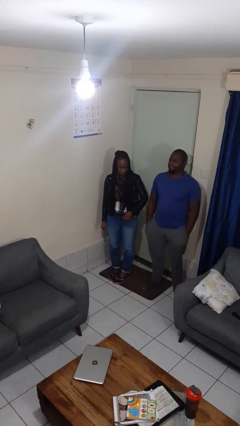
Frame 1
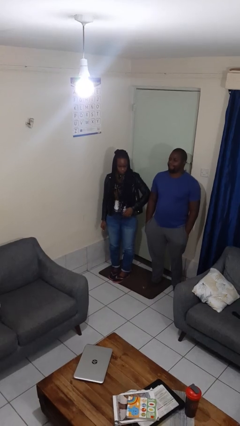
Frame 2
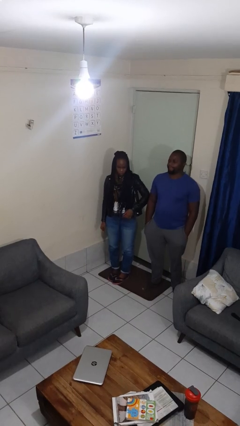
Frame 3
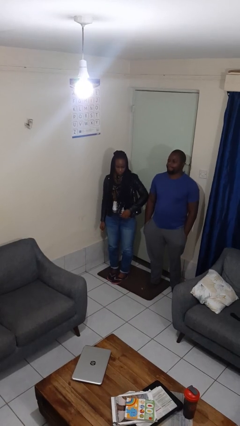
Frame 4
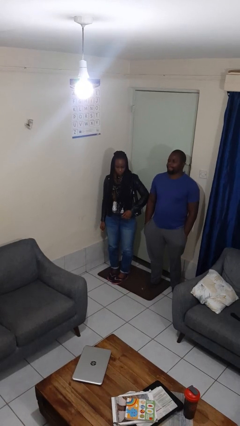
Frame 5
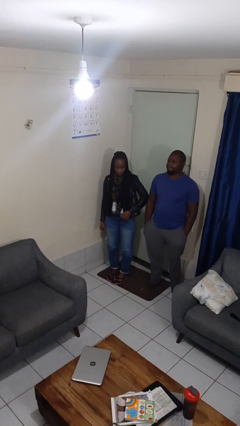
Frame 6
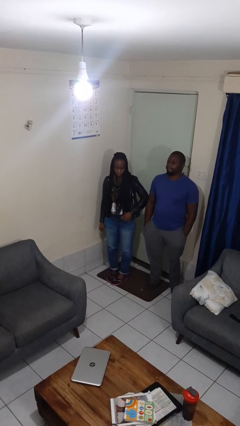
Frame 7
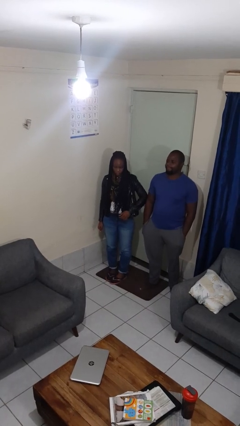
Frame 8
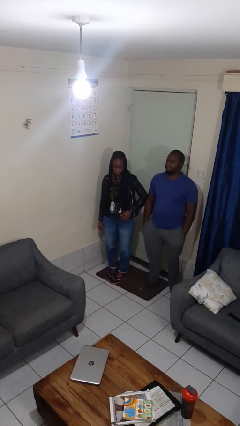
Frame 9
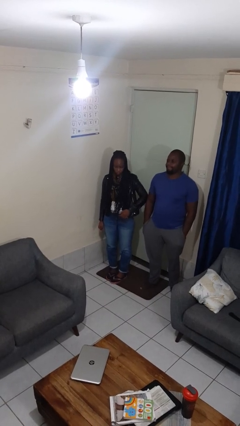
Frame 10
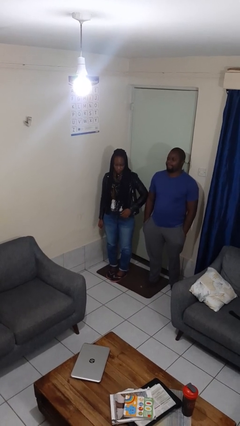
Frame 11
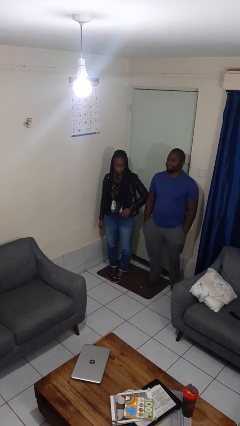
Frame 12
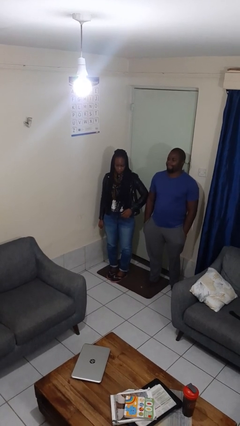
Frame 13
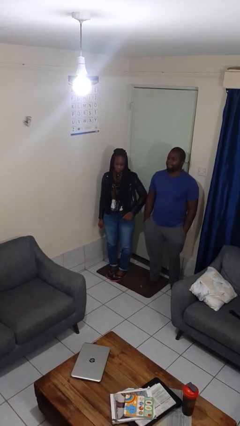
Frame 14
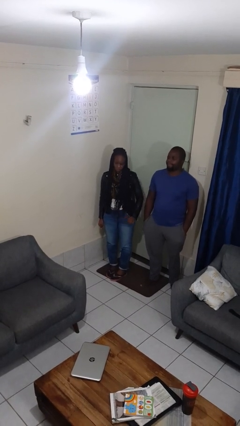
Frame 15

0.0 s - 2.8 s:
person nudges person with elbow

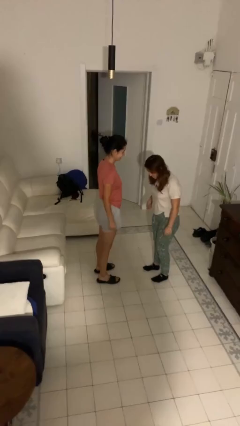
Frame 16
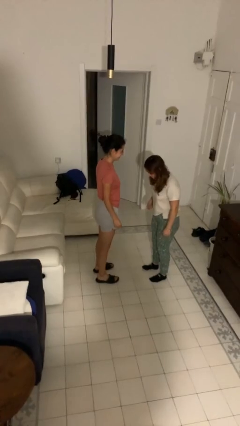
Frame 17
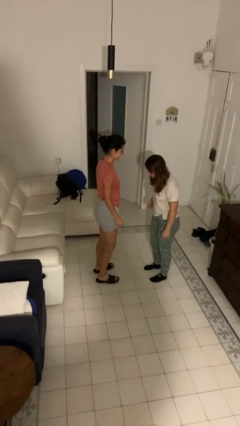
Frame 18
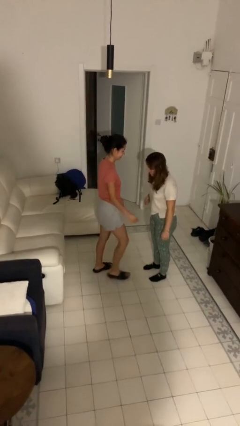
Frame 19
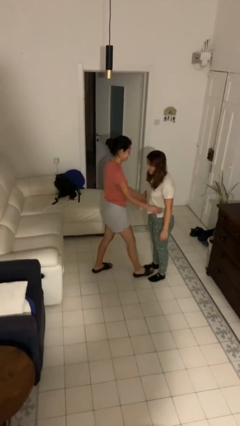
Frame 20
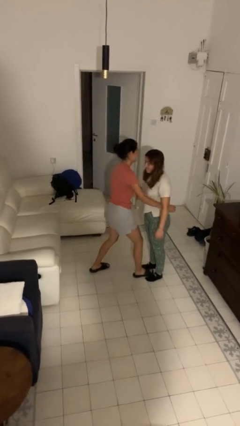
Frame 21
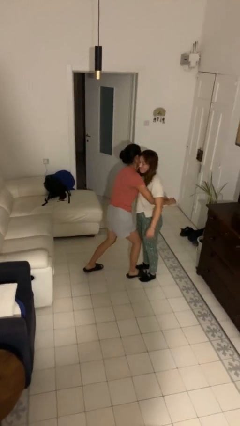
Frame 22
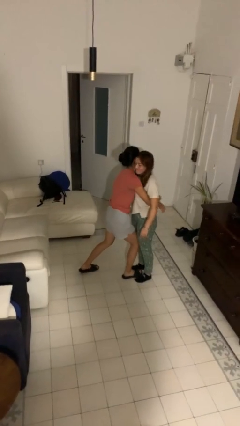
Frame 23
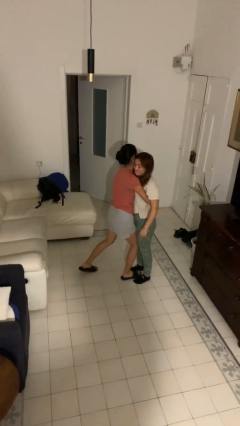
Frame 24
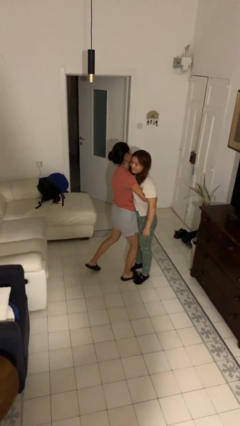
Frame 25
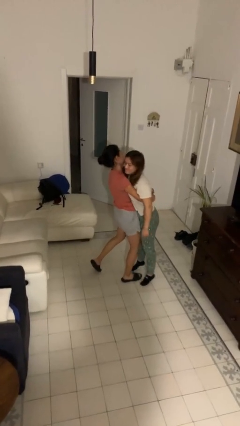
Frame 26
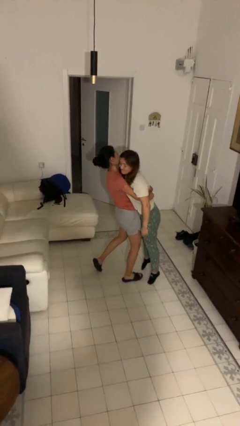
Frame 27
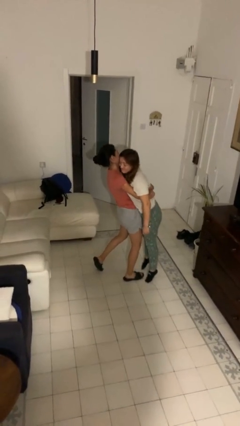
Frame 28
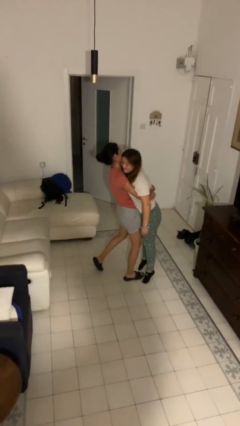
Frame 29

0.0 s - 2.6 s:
person picks up person

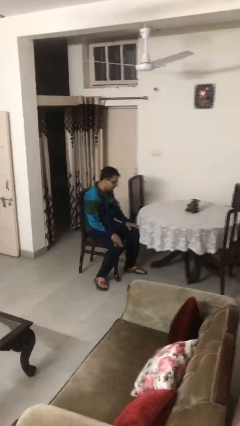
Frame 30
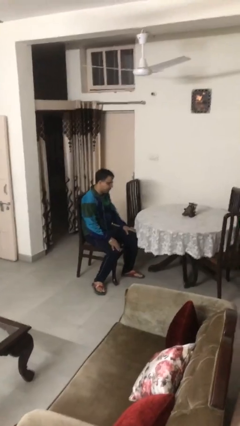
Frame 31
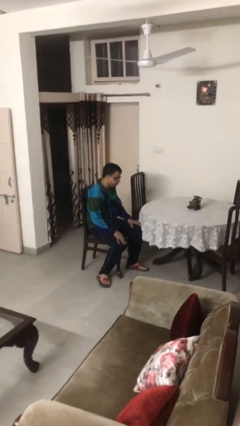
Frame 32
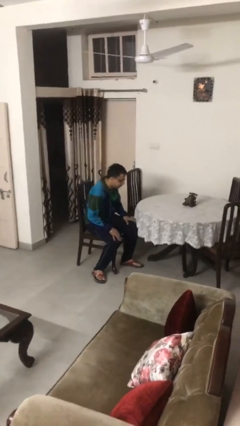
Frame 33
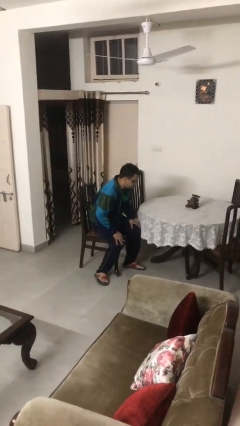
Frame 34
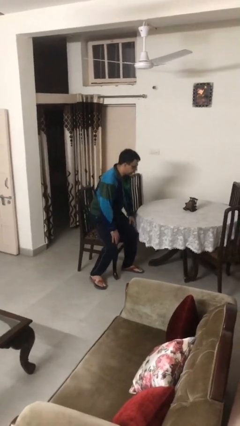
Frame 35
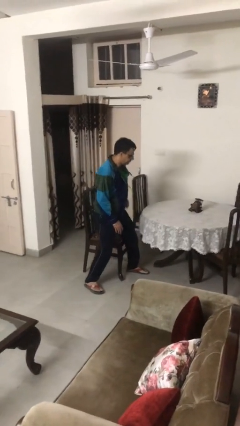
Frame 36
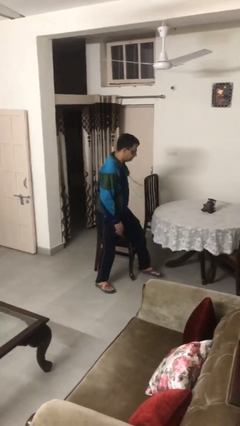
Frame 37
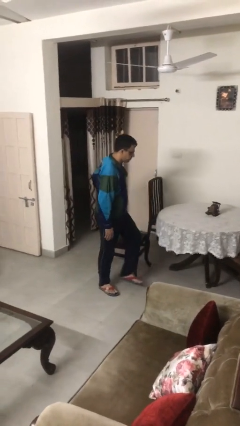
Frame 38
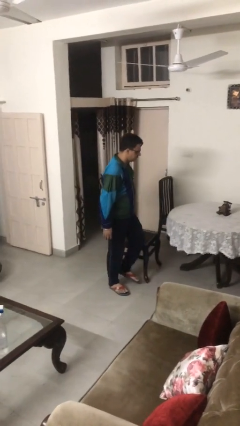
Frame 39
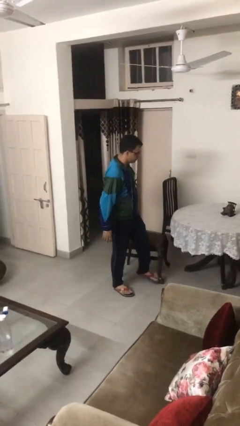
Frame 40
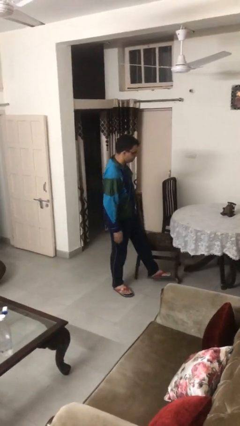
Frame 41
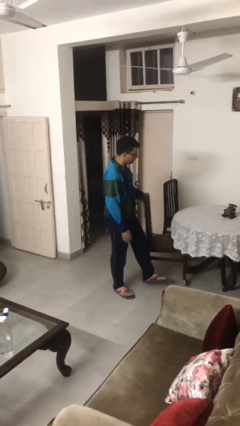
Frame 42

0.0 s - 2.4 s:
person stands up

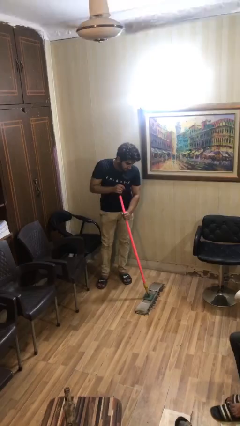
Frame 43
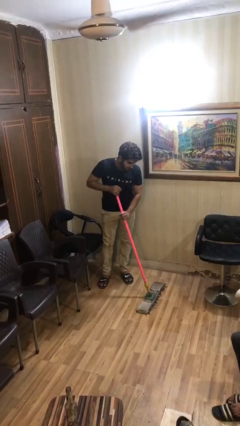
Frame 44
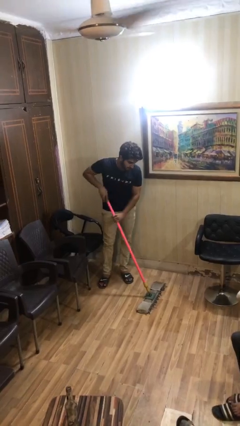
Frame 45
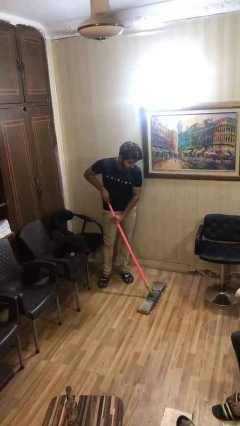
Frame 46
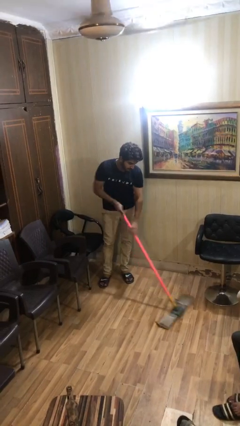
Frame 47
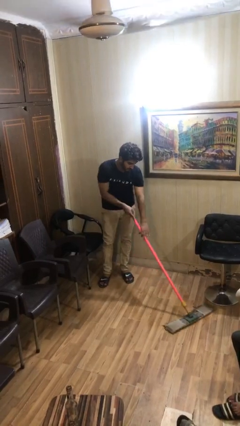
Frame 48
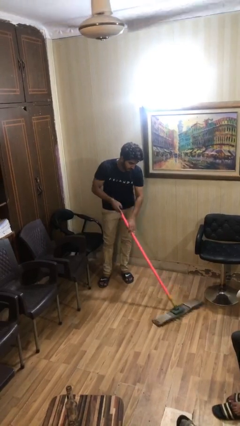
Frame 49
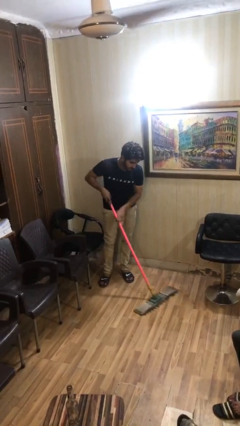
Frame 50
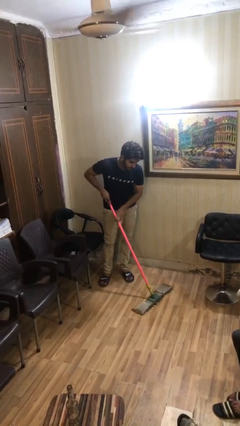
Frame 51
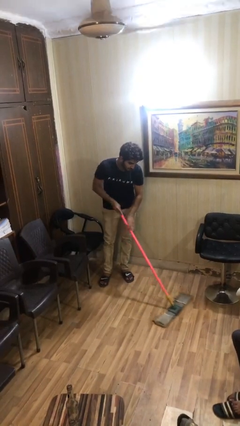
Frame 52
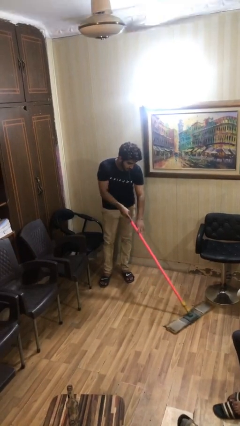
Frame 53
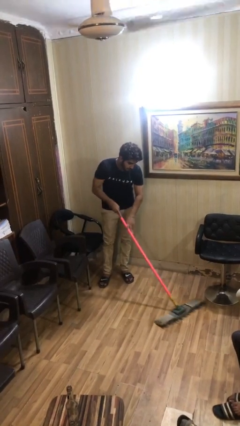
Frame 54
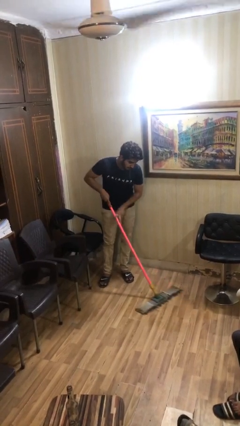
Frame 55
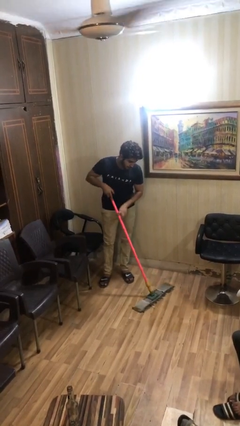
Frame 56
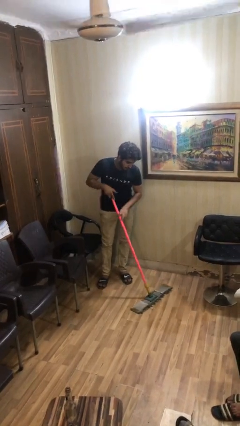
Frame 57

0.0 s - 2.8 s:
person sweeps floor

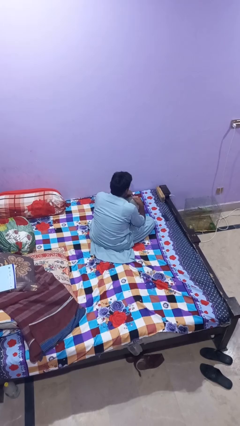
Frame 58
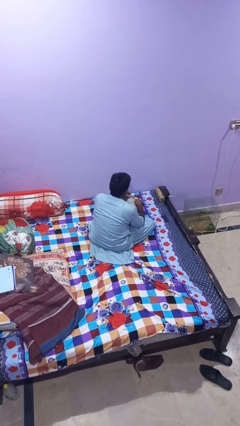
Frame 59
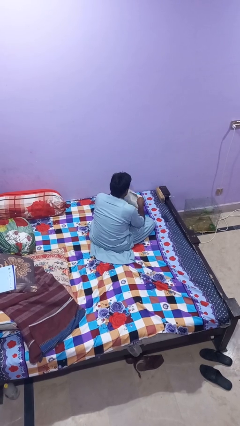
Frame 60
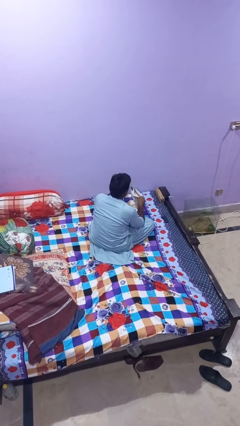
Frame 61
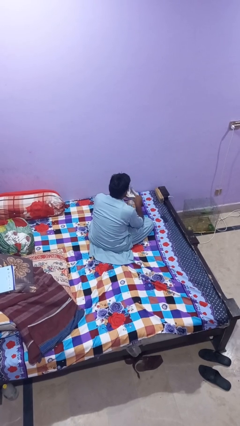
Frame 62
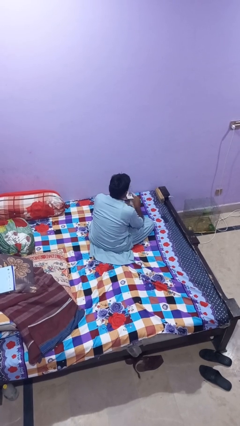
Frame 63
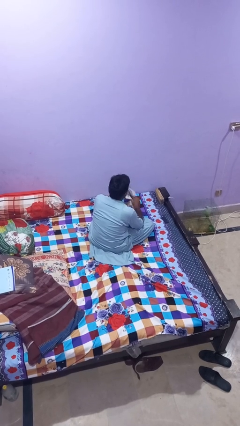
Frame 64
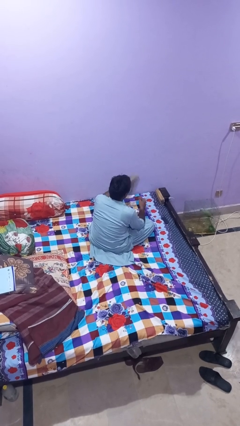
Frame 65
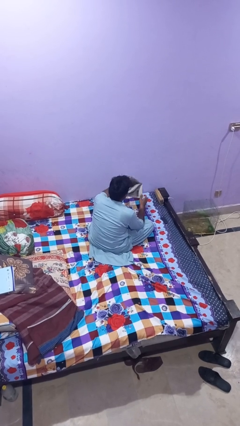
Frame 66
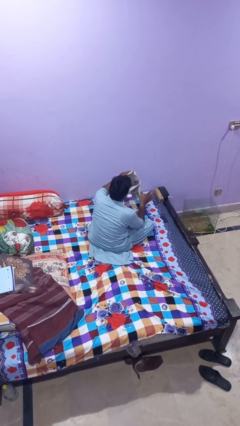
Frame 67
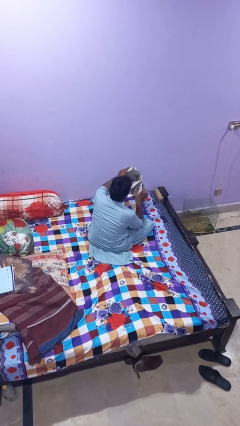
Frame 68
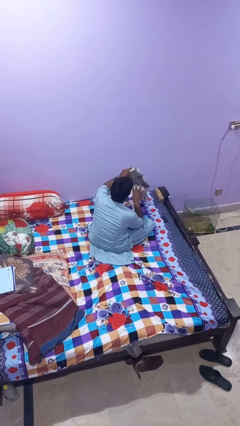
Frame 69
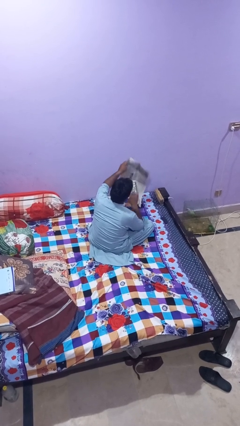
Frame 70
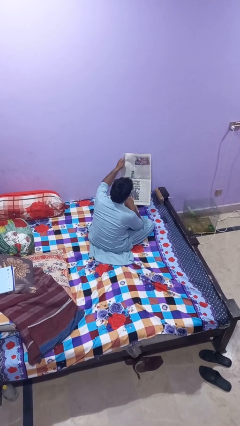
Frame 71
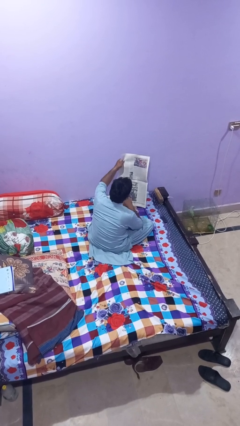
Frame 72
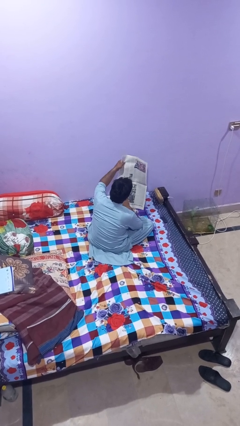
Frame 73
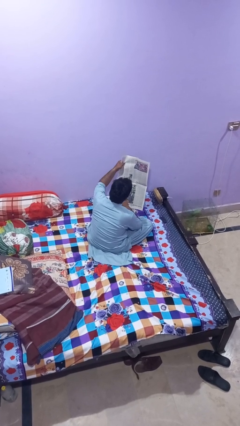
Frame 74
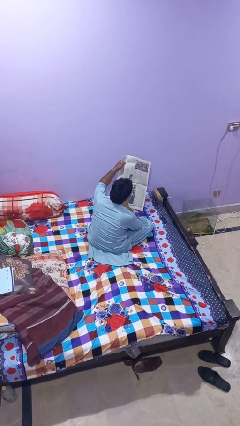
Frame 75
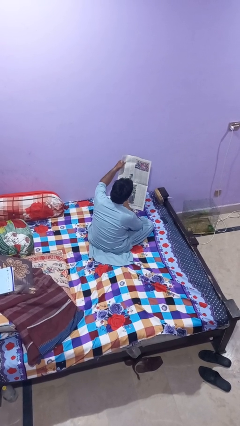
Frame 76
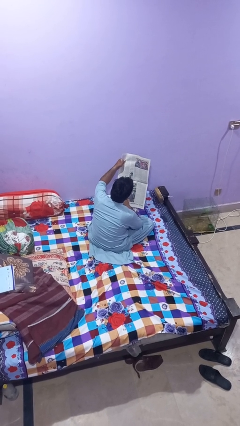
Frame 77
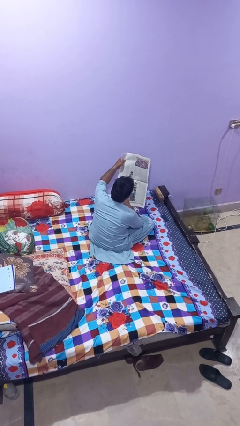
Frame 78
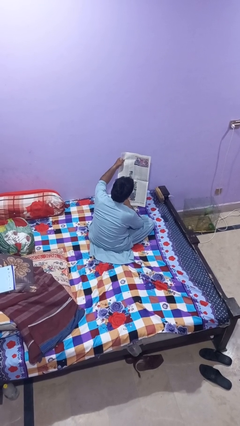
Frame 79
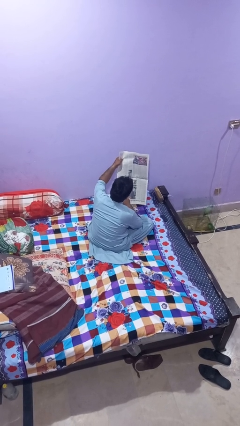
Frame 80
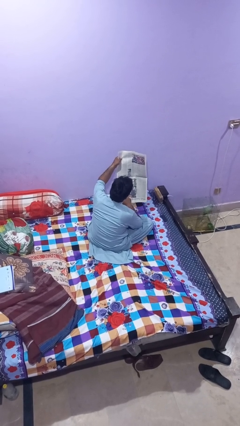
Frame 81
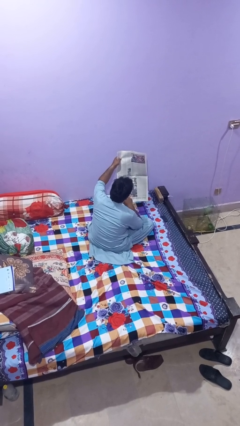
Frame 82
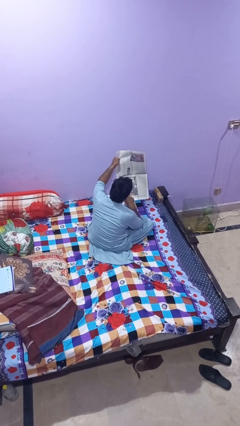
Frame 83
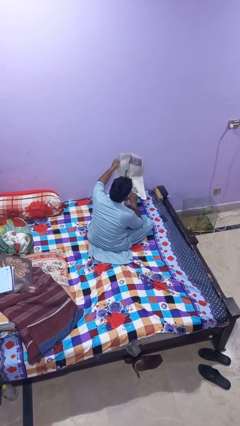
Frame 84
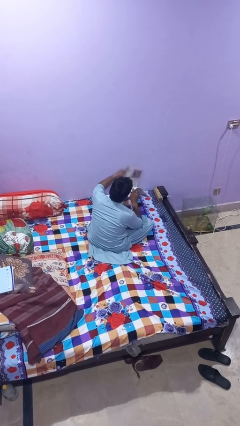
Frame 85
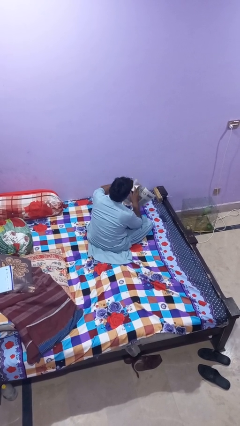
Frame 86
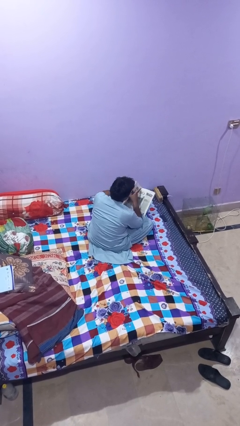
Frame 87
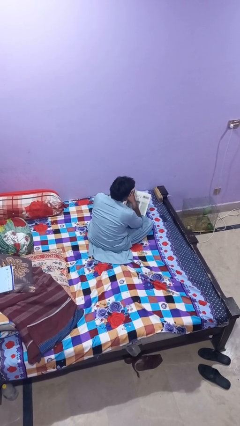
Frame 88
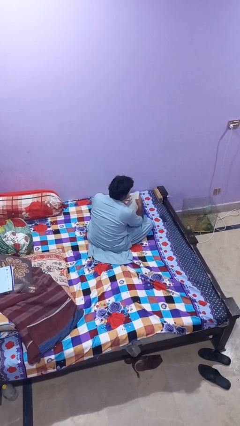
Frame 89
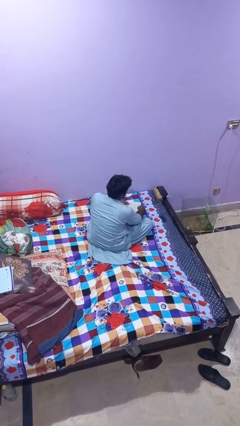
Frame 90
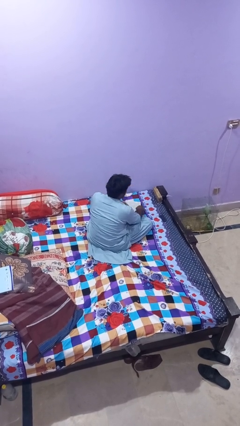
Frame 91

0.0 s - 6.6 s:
person reads newspaper

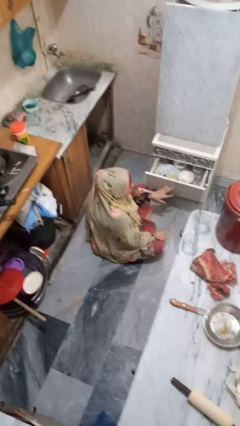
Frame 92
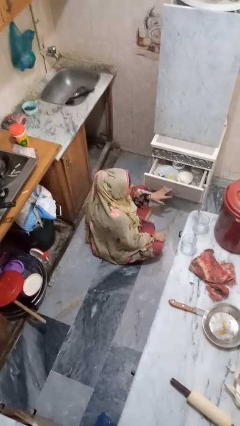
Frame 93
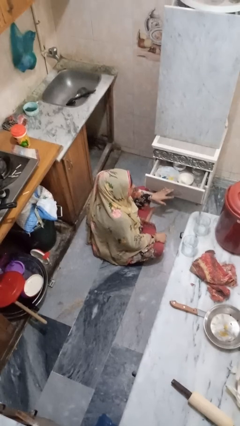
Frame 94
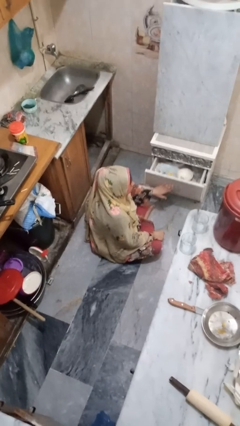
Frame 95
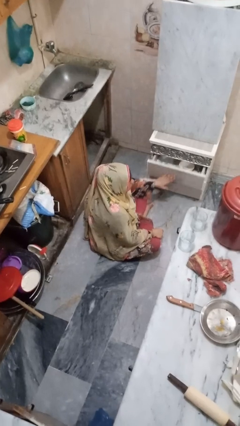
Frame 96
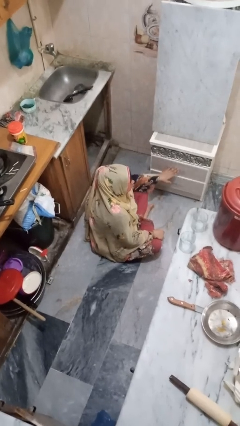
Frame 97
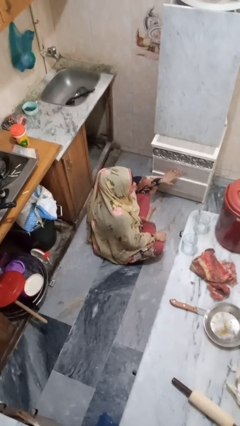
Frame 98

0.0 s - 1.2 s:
person closes kitchen drawer
